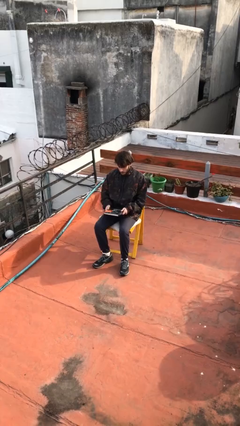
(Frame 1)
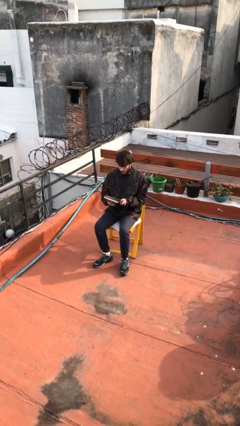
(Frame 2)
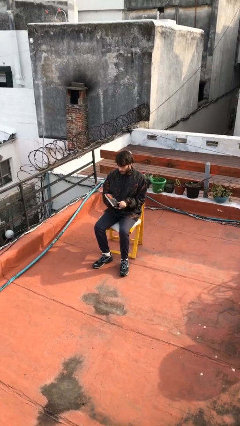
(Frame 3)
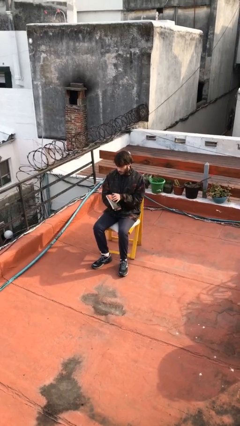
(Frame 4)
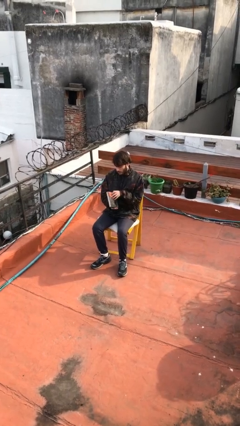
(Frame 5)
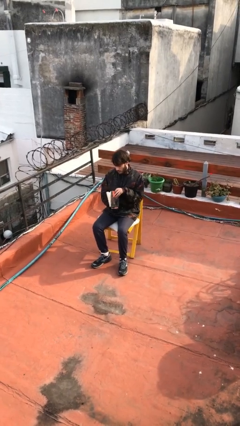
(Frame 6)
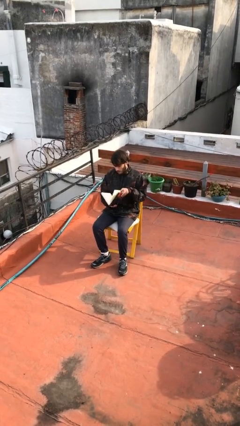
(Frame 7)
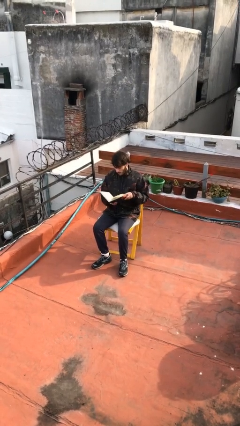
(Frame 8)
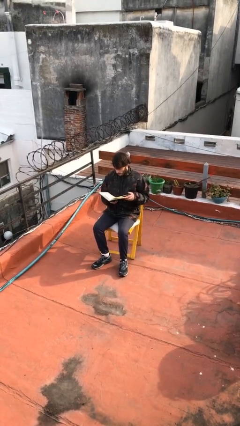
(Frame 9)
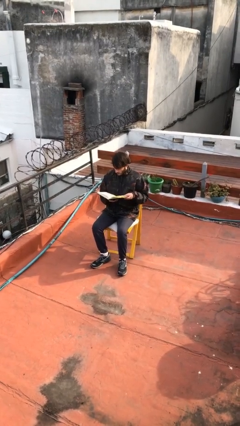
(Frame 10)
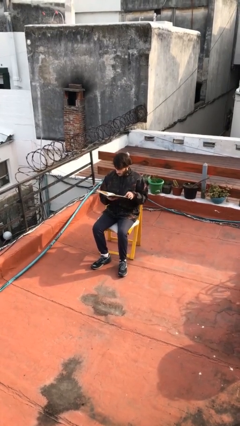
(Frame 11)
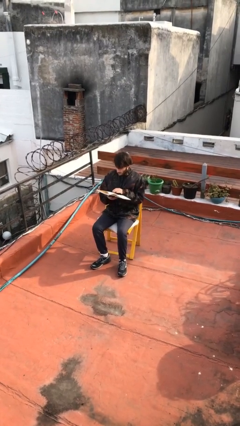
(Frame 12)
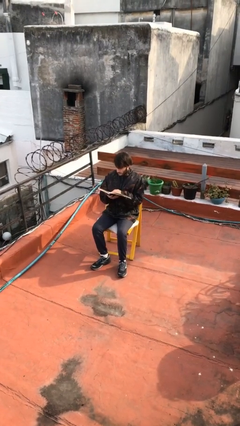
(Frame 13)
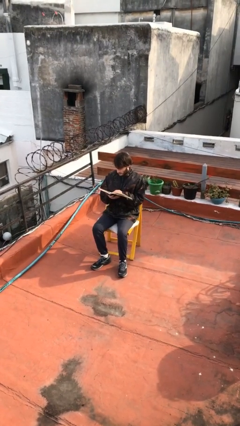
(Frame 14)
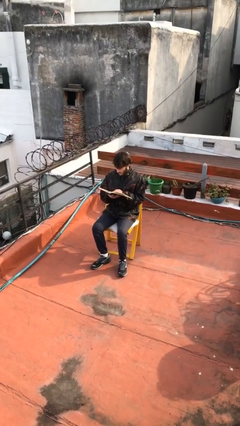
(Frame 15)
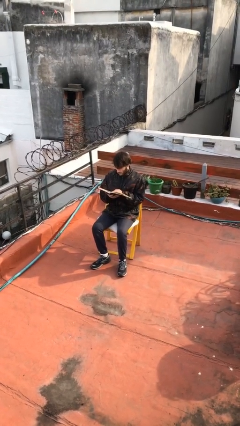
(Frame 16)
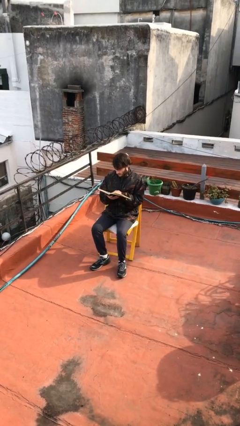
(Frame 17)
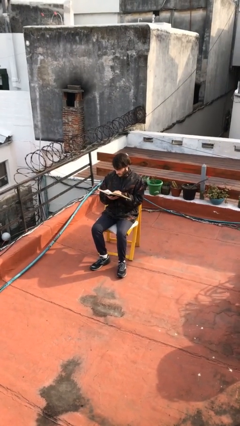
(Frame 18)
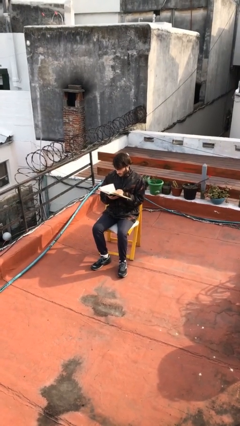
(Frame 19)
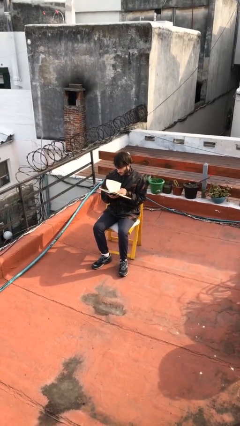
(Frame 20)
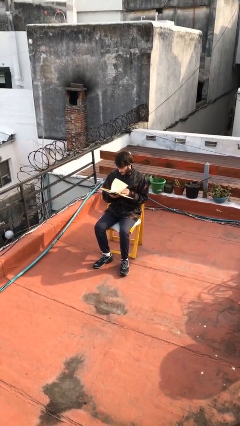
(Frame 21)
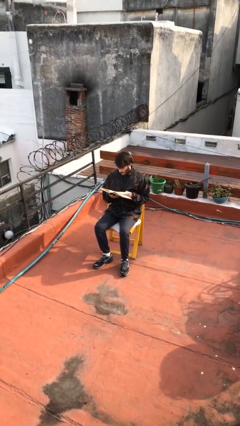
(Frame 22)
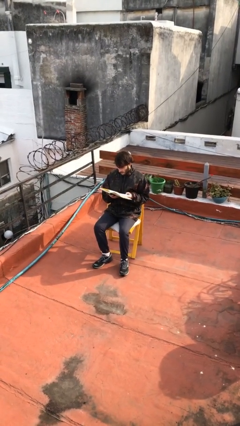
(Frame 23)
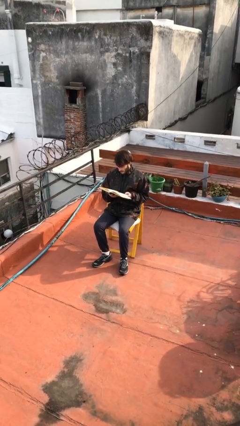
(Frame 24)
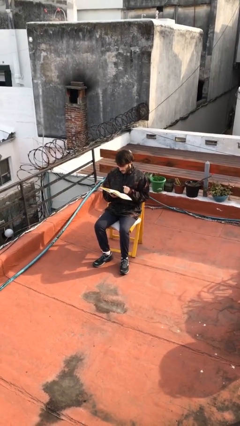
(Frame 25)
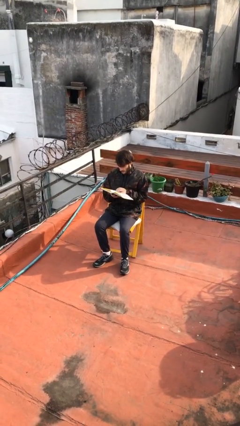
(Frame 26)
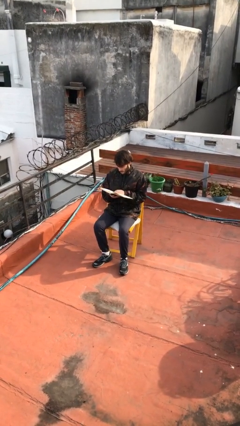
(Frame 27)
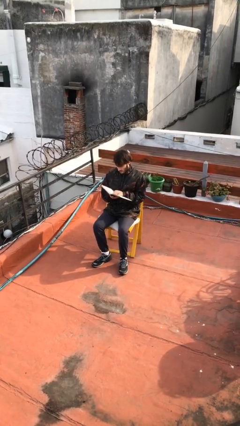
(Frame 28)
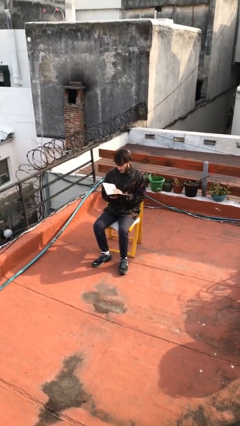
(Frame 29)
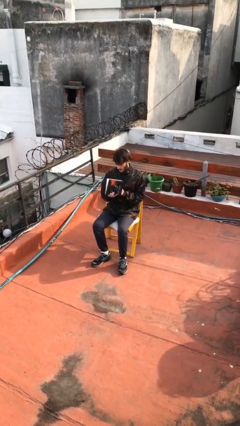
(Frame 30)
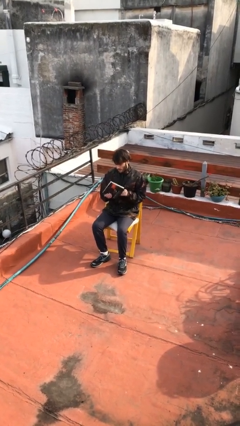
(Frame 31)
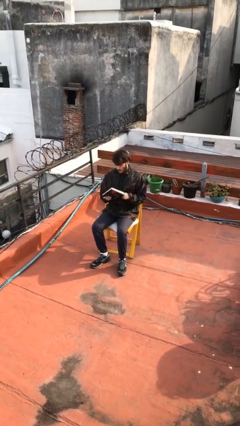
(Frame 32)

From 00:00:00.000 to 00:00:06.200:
person reads book

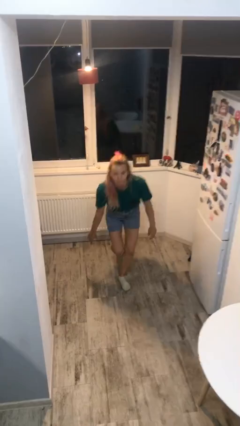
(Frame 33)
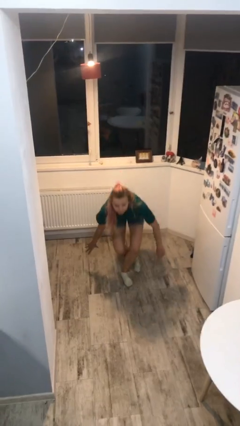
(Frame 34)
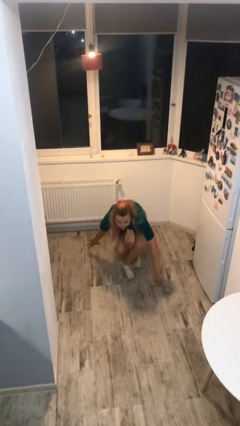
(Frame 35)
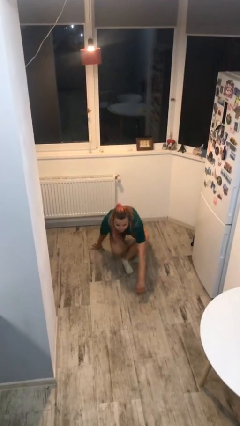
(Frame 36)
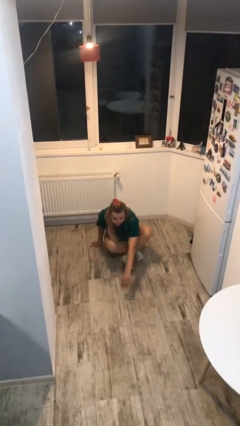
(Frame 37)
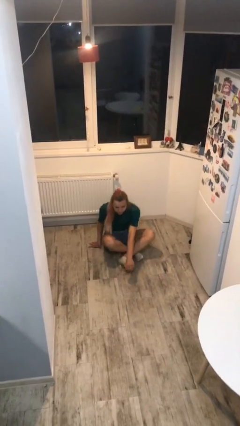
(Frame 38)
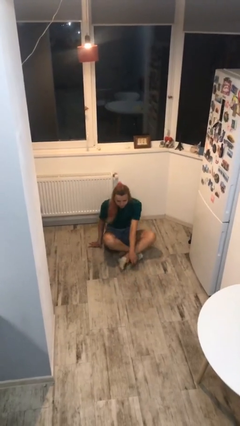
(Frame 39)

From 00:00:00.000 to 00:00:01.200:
person sits crisscross

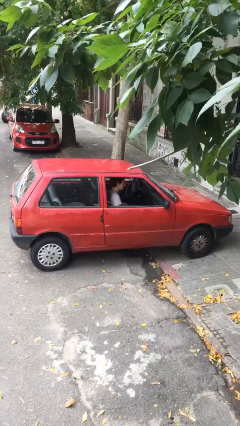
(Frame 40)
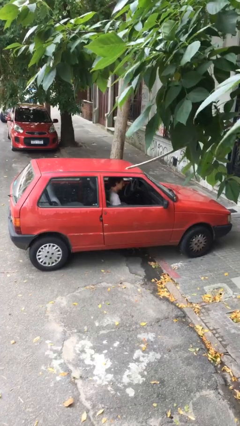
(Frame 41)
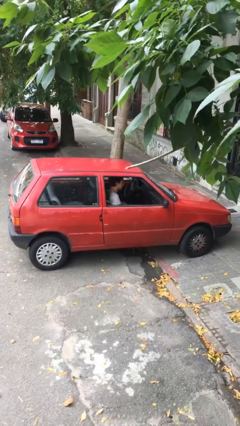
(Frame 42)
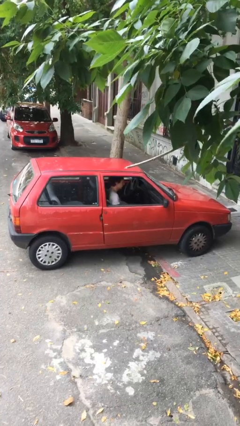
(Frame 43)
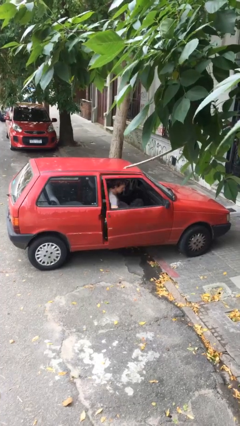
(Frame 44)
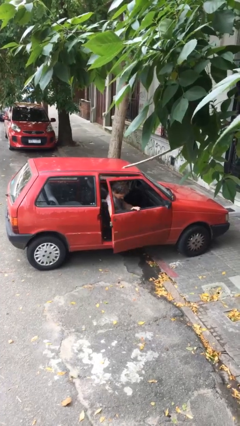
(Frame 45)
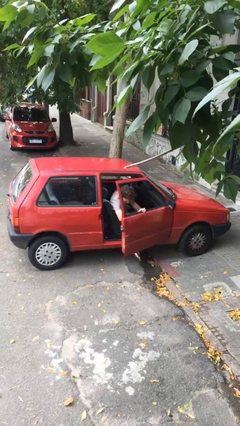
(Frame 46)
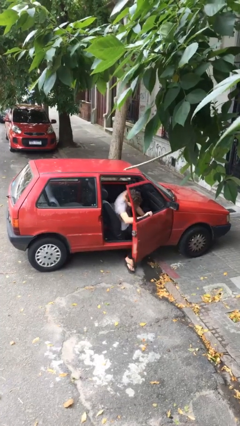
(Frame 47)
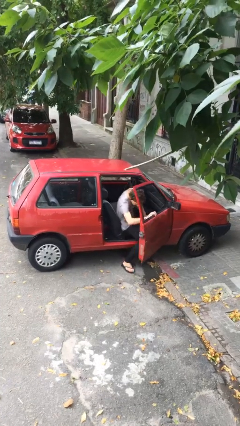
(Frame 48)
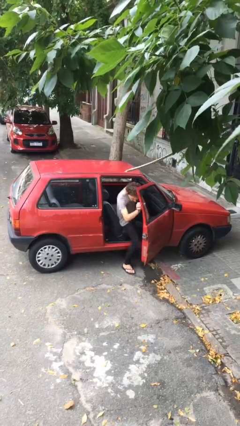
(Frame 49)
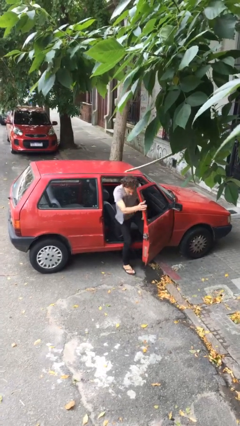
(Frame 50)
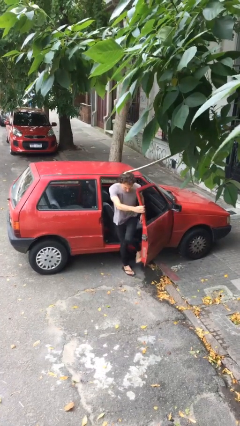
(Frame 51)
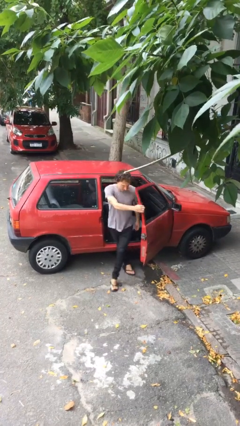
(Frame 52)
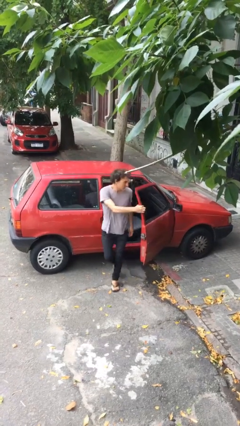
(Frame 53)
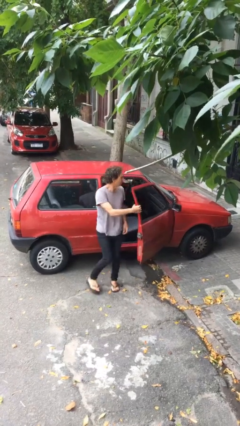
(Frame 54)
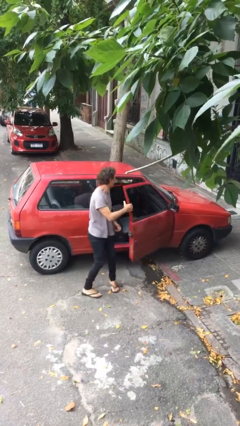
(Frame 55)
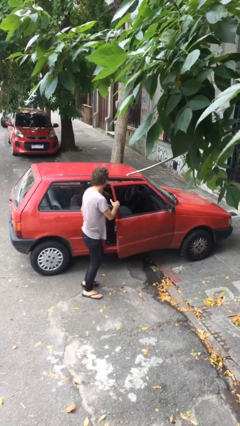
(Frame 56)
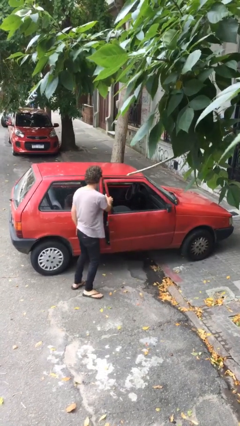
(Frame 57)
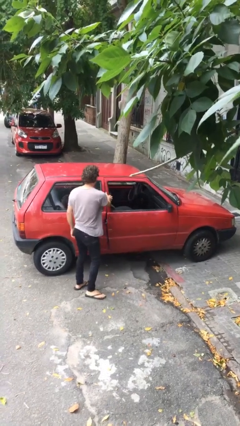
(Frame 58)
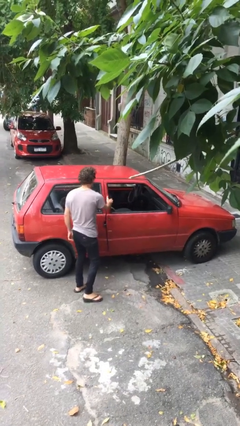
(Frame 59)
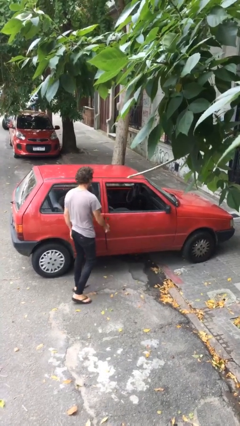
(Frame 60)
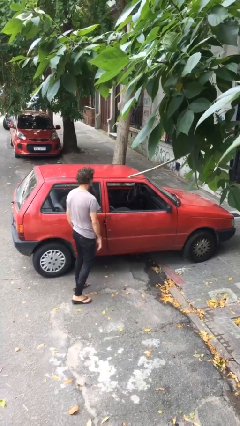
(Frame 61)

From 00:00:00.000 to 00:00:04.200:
car drops off person

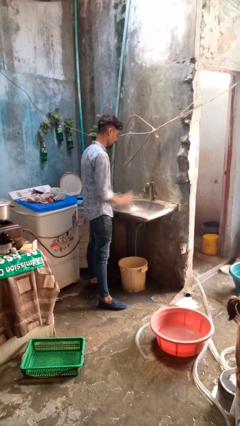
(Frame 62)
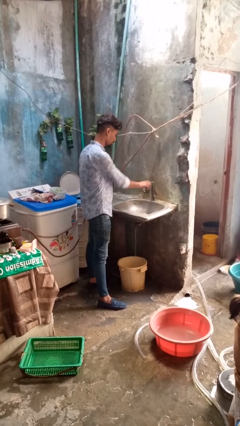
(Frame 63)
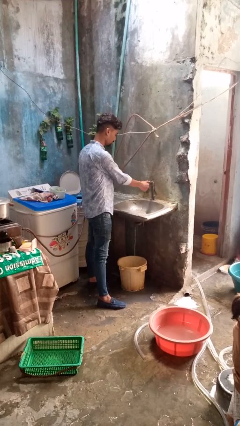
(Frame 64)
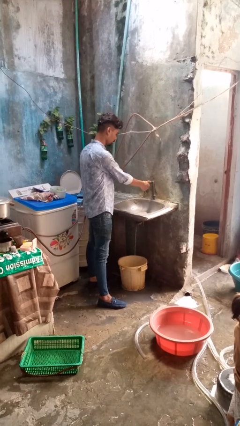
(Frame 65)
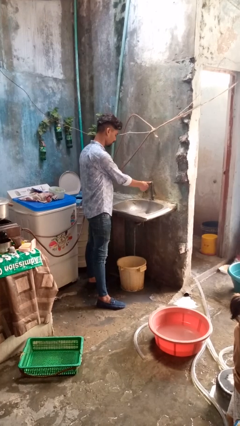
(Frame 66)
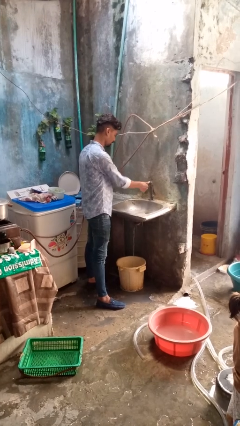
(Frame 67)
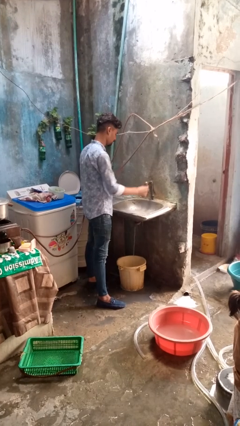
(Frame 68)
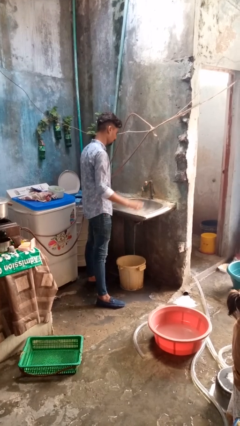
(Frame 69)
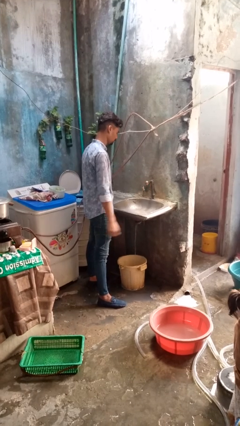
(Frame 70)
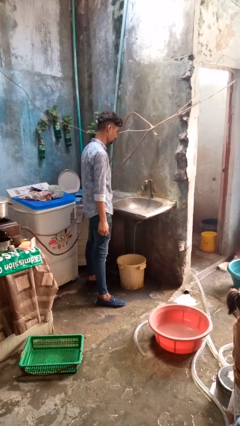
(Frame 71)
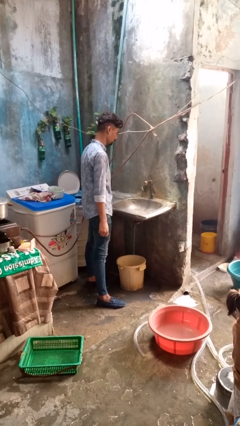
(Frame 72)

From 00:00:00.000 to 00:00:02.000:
person turns off faucet

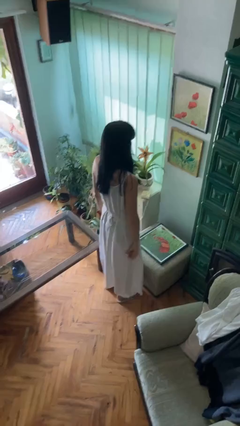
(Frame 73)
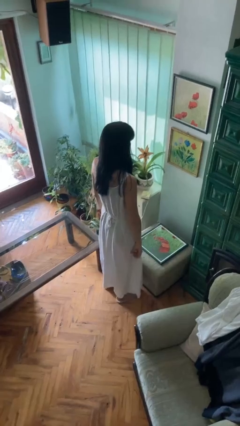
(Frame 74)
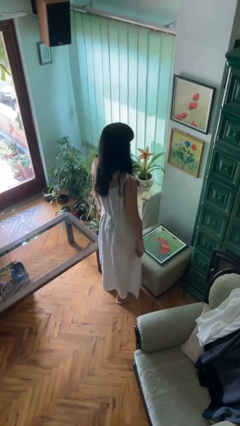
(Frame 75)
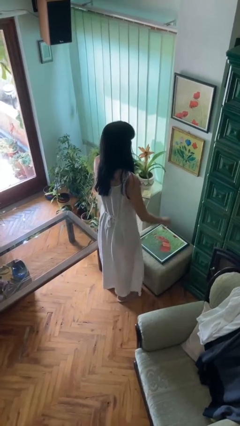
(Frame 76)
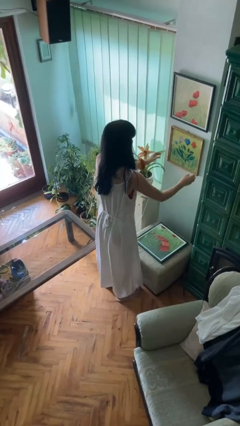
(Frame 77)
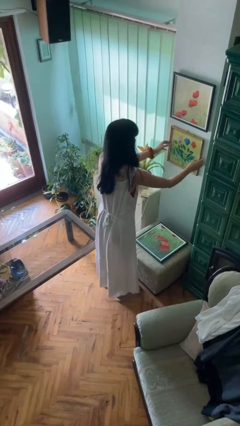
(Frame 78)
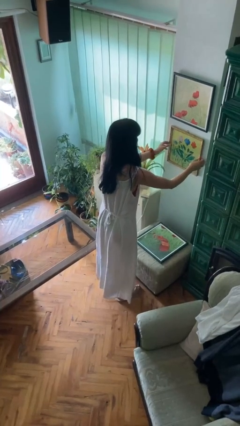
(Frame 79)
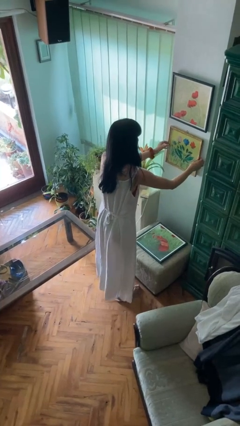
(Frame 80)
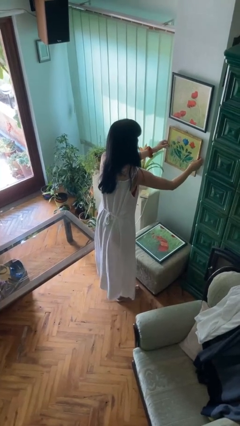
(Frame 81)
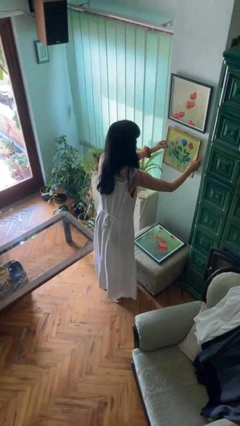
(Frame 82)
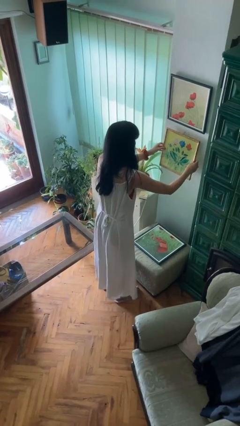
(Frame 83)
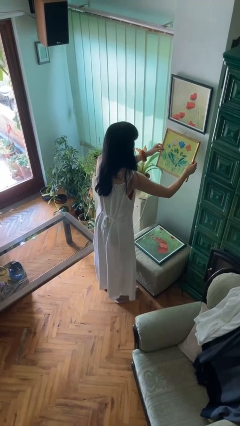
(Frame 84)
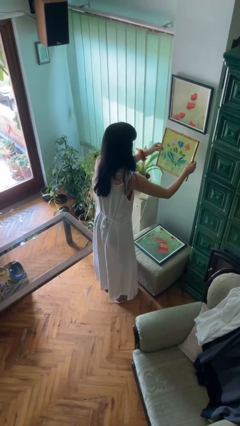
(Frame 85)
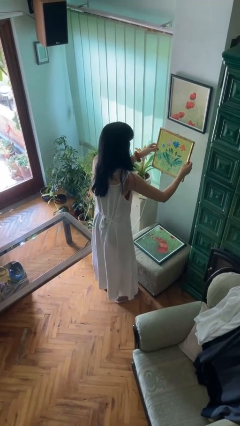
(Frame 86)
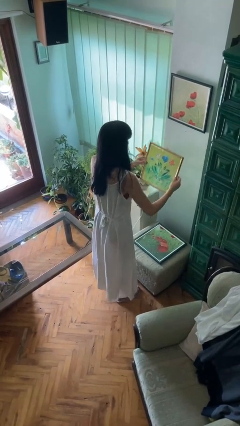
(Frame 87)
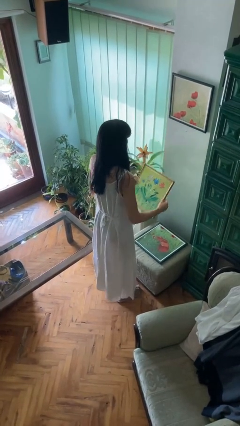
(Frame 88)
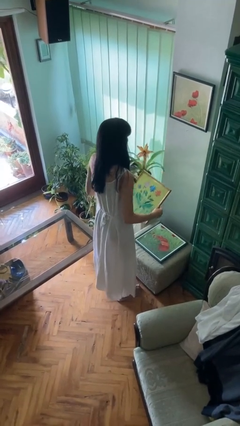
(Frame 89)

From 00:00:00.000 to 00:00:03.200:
person takes down picture frame

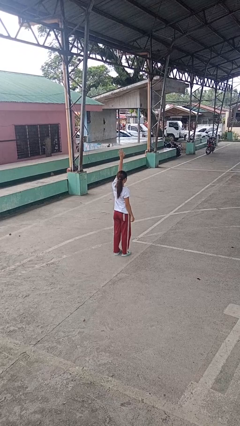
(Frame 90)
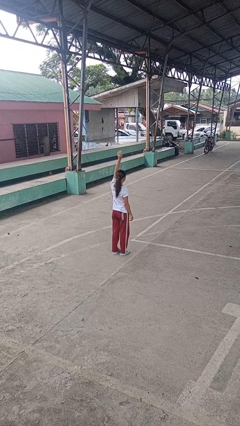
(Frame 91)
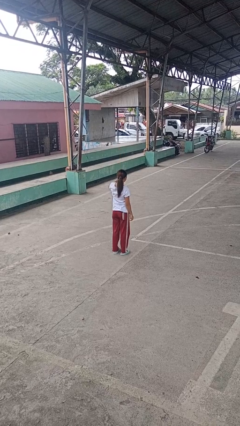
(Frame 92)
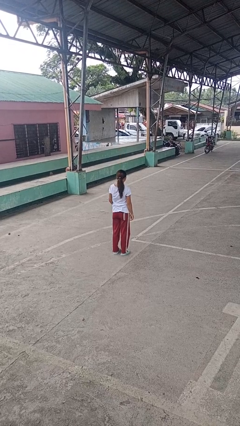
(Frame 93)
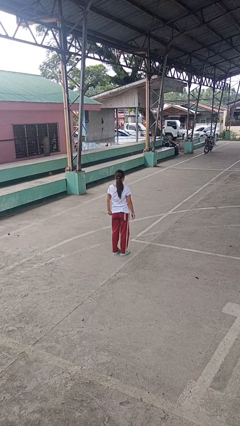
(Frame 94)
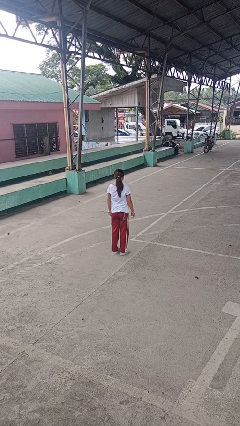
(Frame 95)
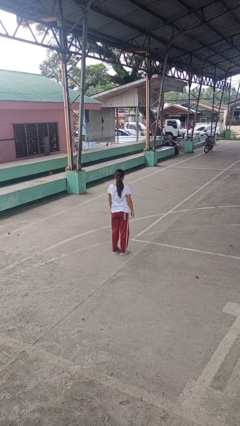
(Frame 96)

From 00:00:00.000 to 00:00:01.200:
person gestures lower hand
